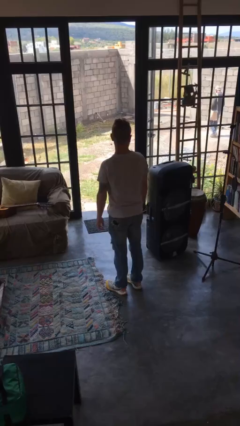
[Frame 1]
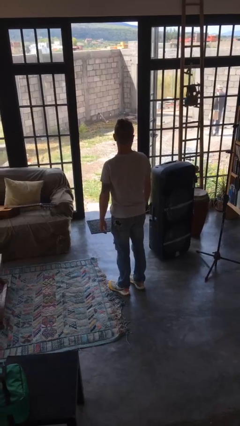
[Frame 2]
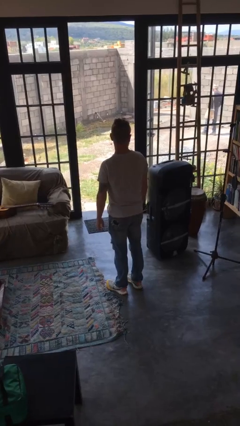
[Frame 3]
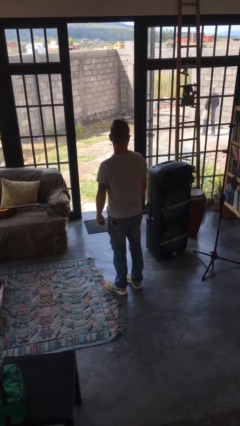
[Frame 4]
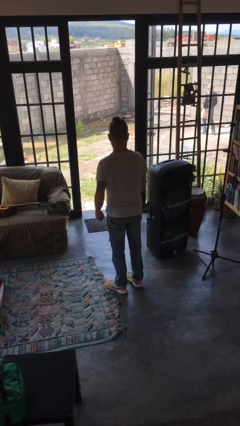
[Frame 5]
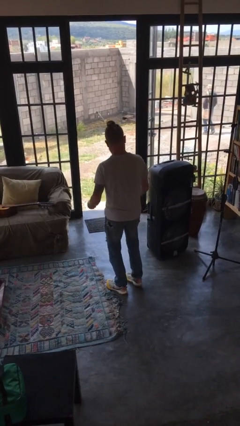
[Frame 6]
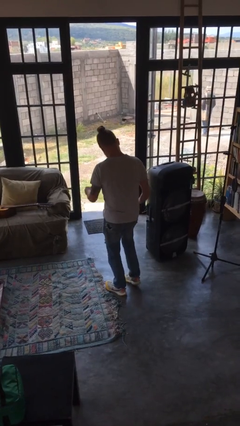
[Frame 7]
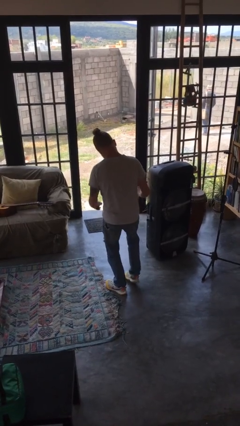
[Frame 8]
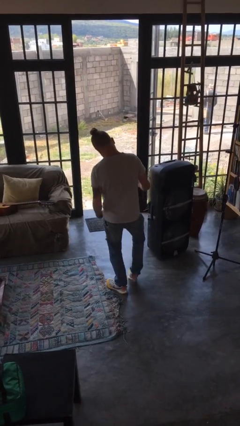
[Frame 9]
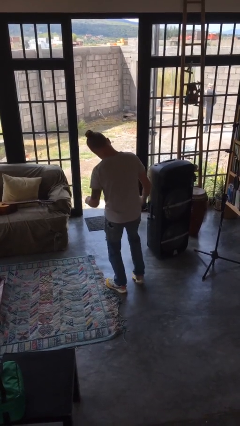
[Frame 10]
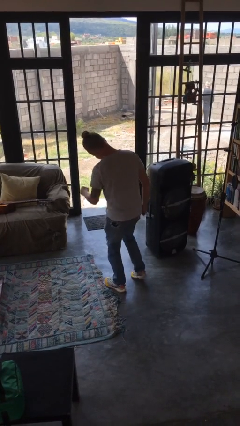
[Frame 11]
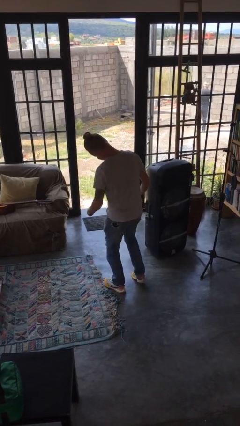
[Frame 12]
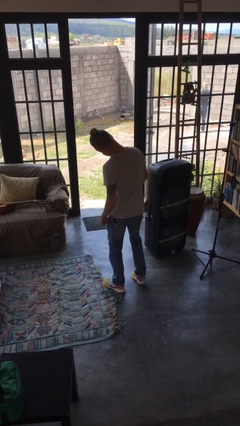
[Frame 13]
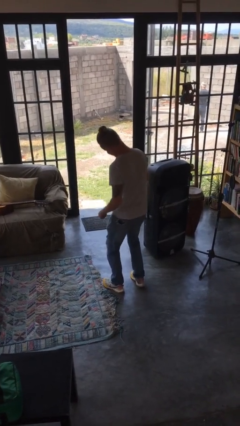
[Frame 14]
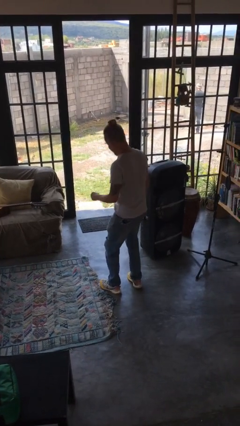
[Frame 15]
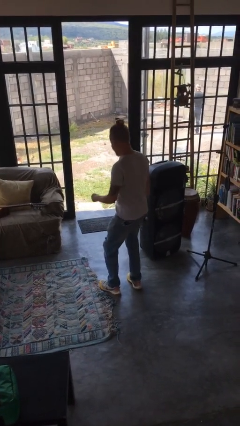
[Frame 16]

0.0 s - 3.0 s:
person dances in place

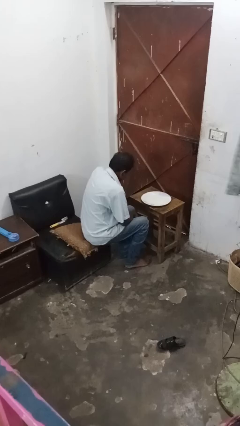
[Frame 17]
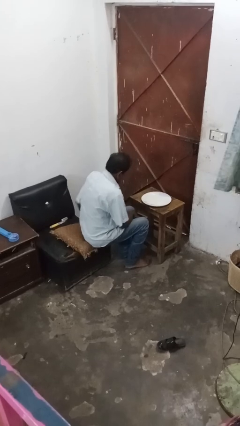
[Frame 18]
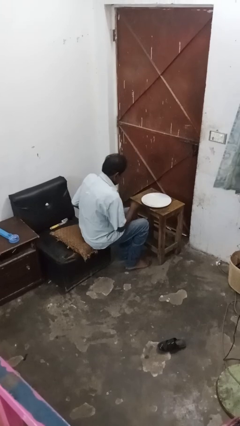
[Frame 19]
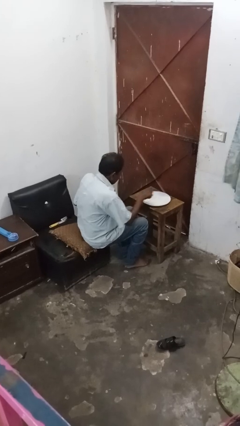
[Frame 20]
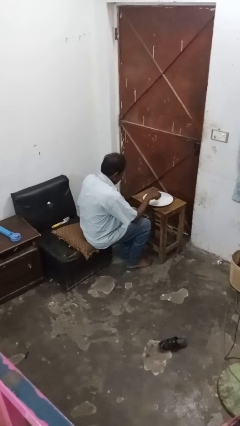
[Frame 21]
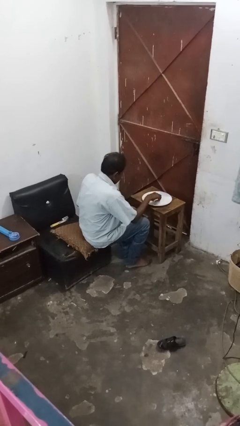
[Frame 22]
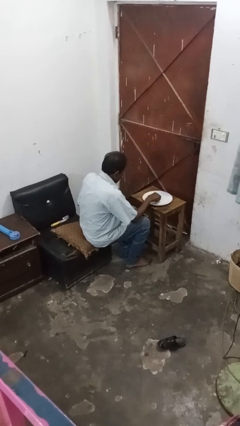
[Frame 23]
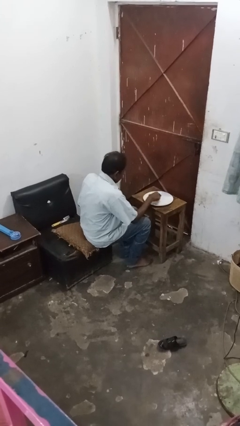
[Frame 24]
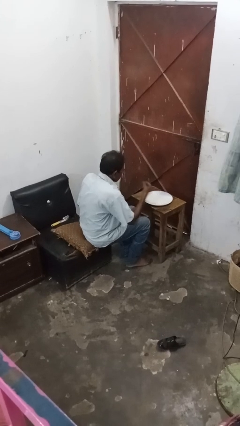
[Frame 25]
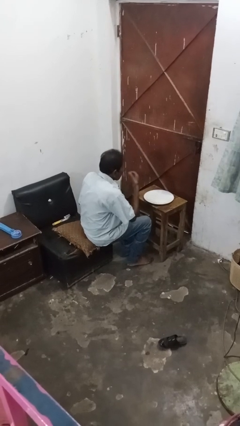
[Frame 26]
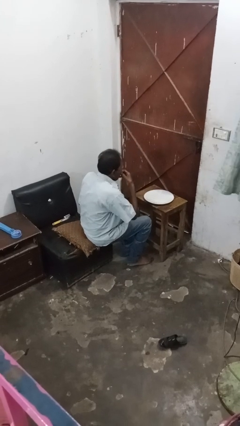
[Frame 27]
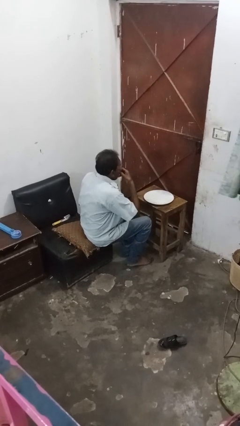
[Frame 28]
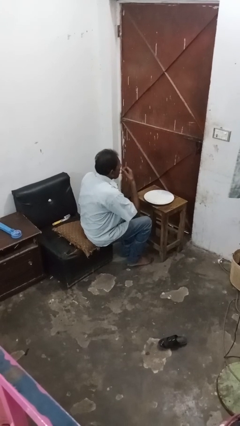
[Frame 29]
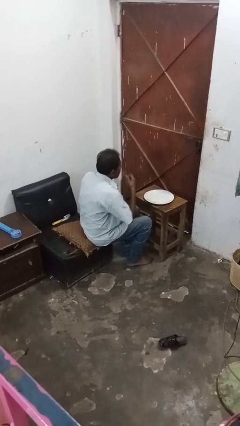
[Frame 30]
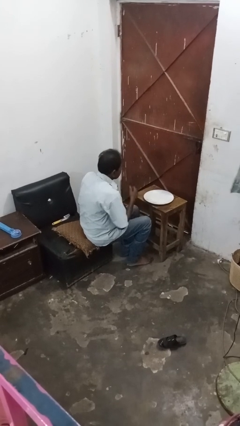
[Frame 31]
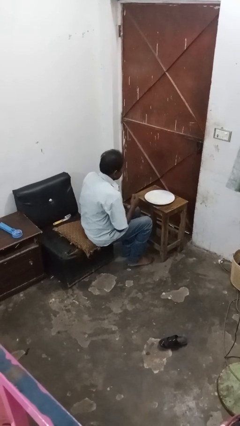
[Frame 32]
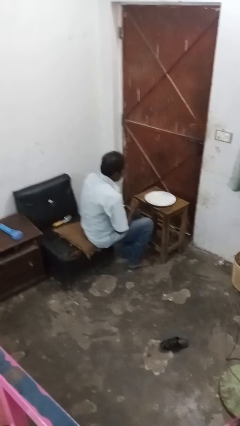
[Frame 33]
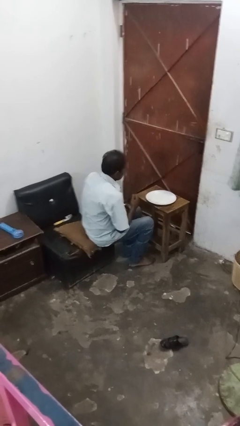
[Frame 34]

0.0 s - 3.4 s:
person eats with hands

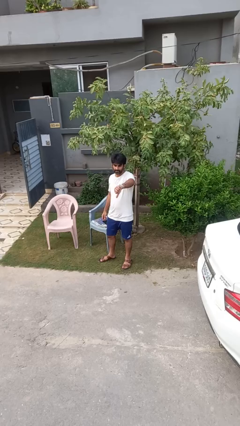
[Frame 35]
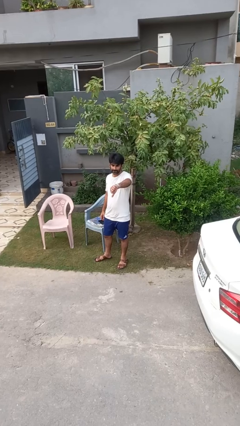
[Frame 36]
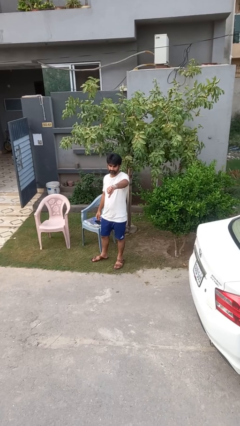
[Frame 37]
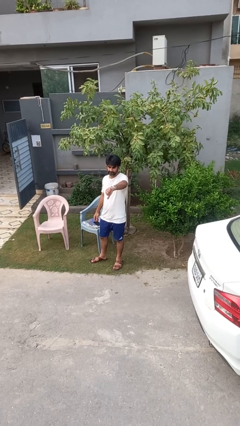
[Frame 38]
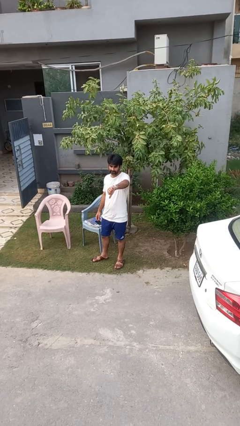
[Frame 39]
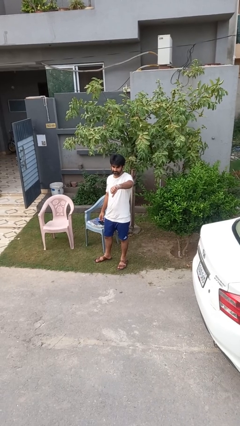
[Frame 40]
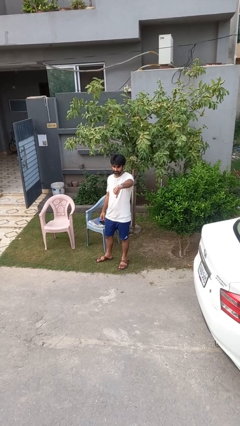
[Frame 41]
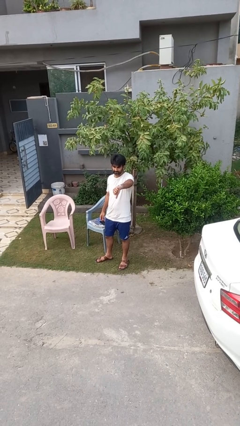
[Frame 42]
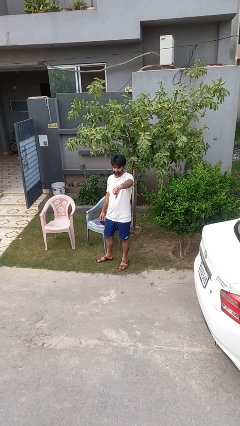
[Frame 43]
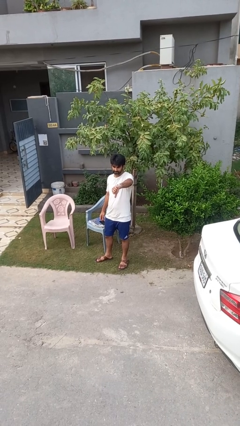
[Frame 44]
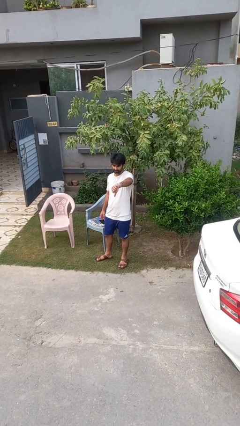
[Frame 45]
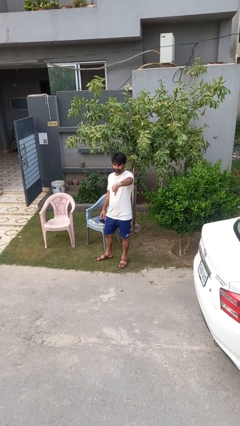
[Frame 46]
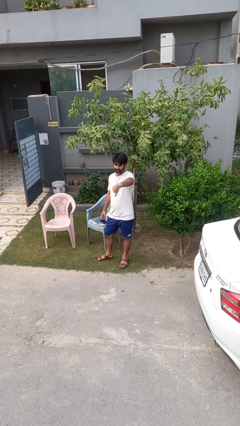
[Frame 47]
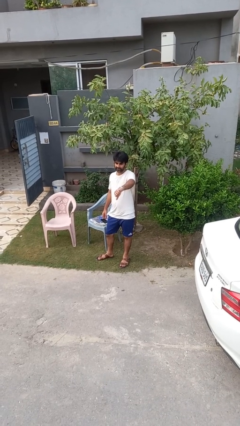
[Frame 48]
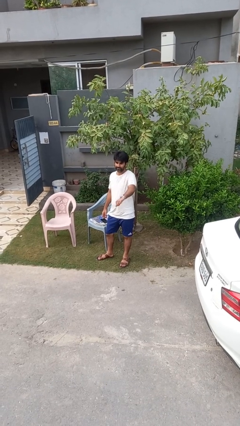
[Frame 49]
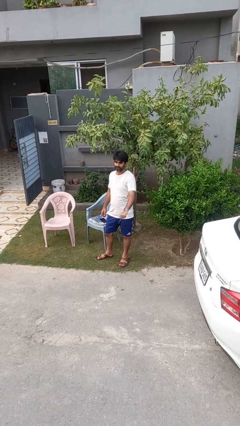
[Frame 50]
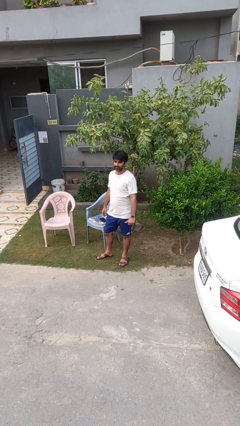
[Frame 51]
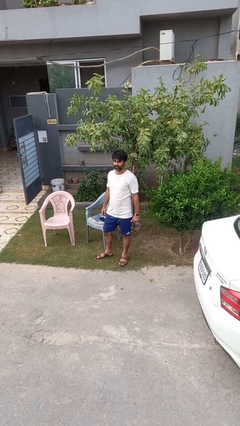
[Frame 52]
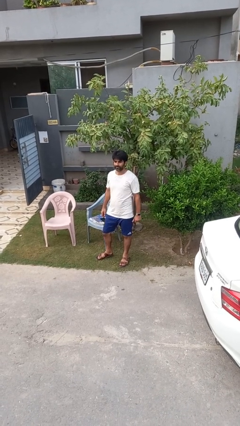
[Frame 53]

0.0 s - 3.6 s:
person gestures thumbs down

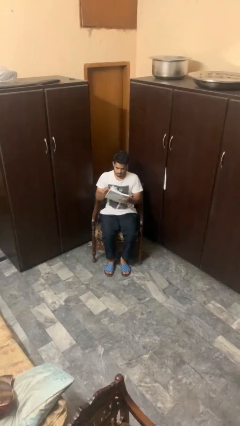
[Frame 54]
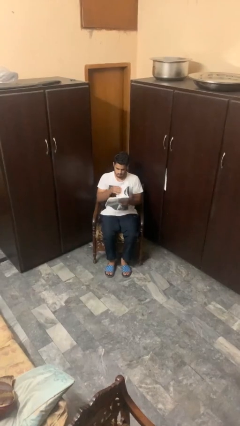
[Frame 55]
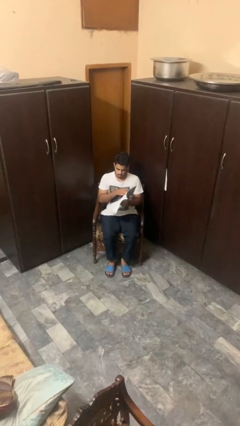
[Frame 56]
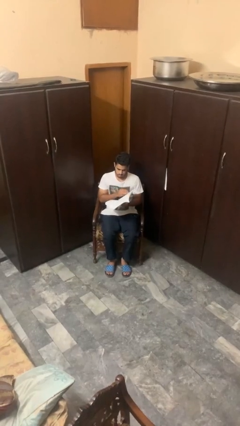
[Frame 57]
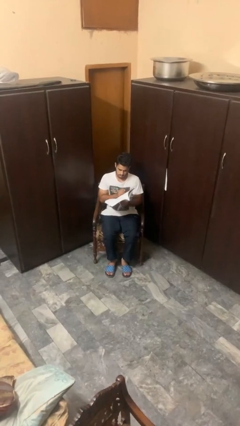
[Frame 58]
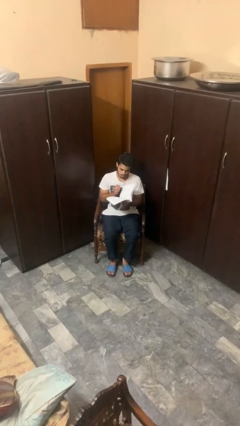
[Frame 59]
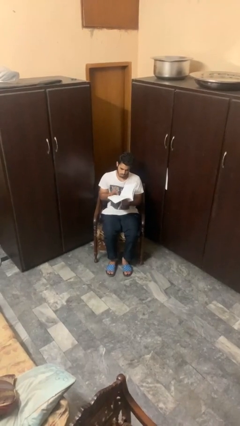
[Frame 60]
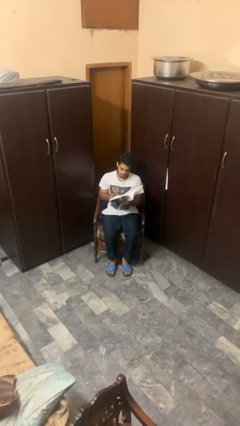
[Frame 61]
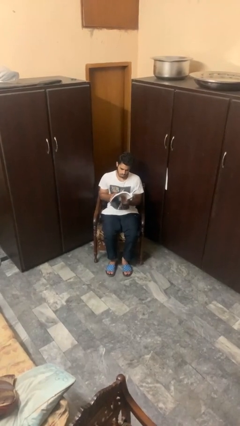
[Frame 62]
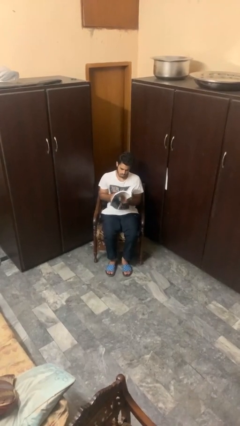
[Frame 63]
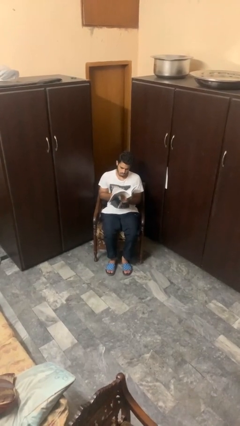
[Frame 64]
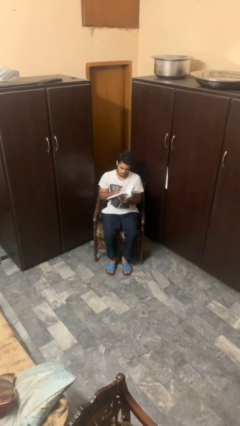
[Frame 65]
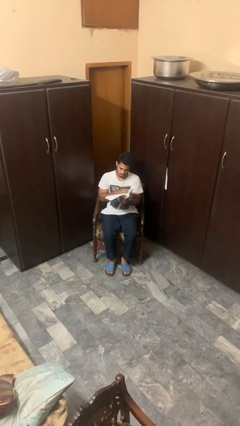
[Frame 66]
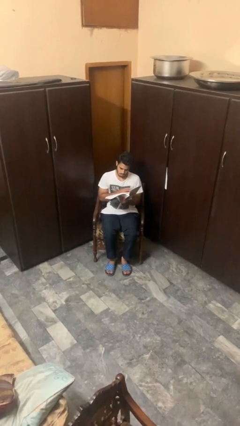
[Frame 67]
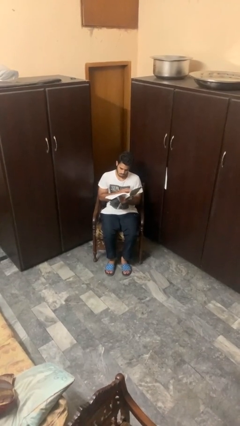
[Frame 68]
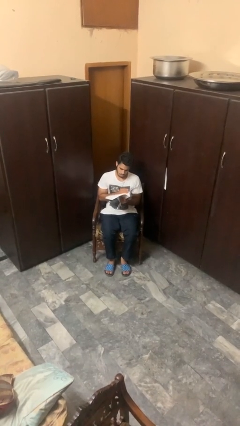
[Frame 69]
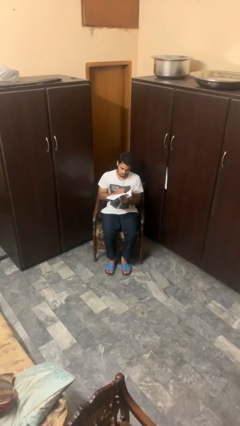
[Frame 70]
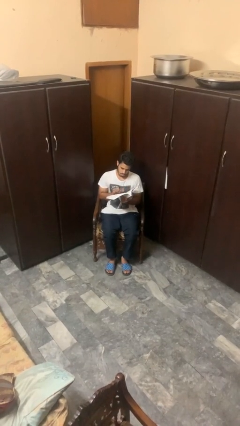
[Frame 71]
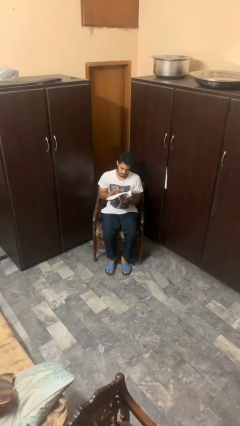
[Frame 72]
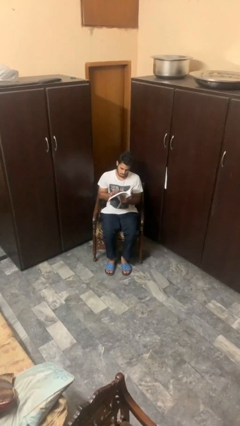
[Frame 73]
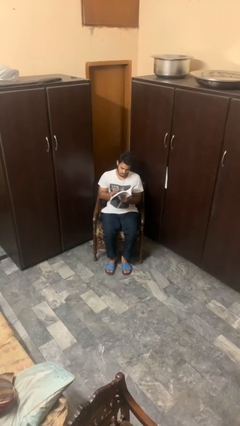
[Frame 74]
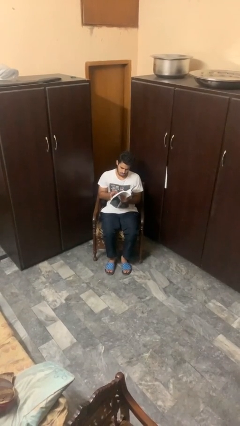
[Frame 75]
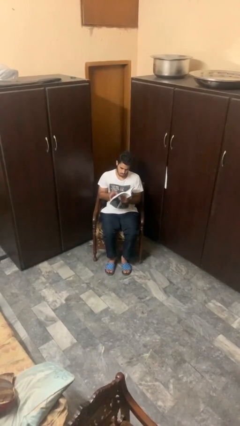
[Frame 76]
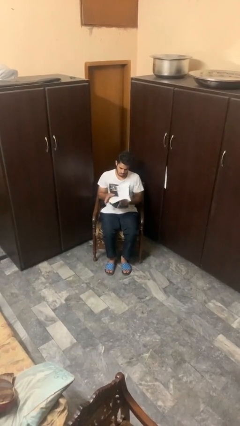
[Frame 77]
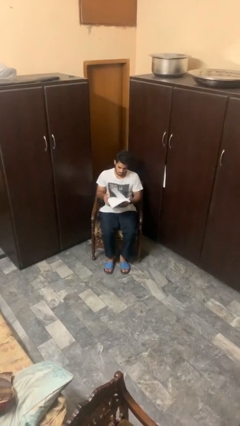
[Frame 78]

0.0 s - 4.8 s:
person reads book

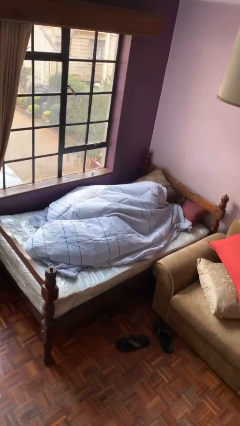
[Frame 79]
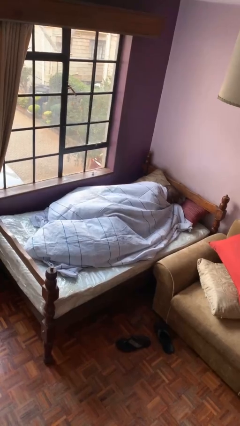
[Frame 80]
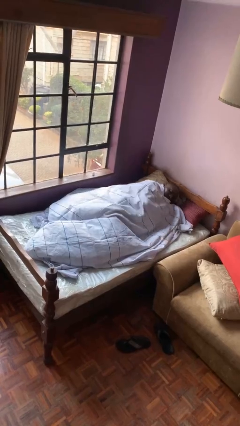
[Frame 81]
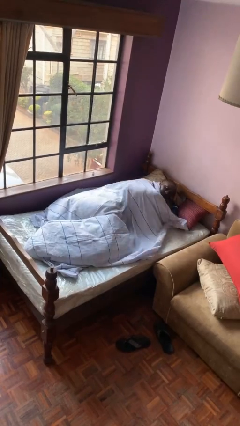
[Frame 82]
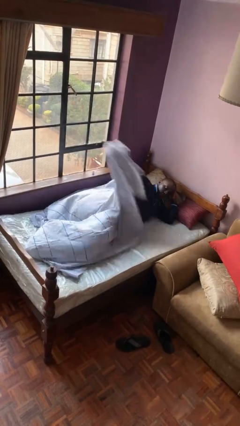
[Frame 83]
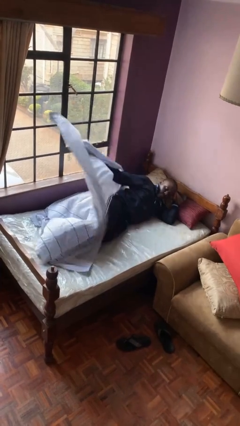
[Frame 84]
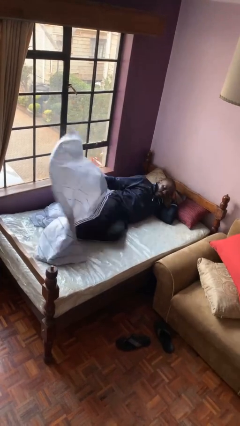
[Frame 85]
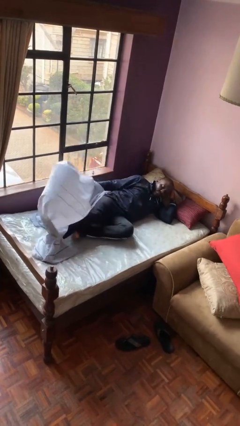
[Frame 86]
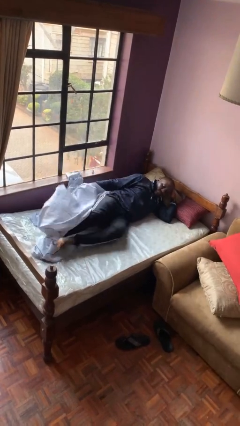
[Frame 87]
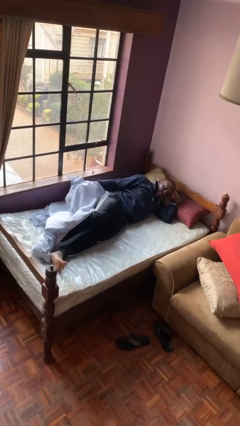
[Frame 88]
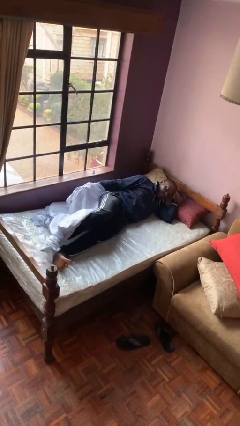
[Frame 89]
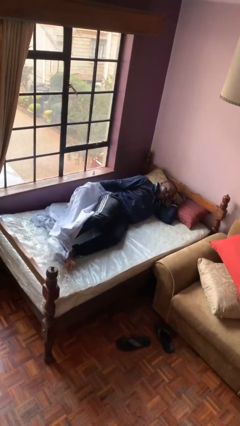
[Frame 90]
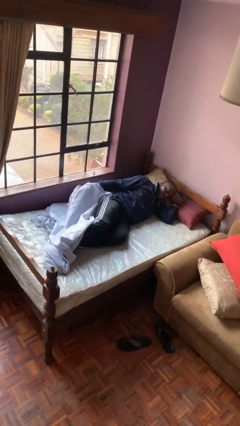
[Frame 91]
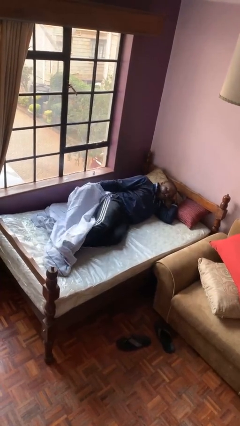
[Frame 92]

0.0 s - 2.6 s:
person uncovers with bedsheets

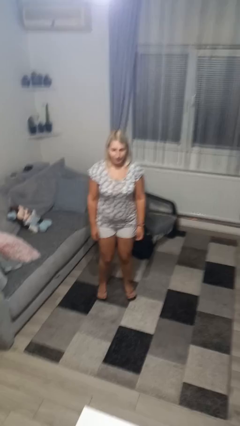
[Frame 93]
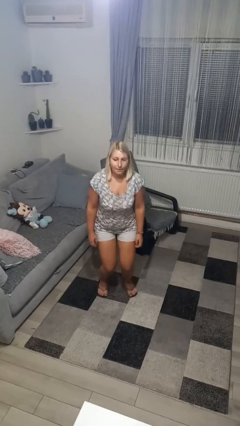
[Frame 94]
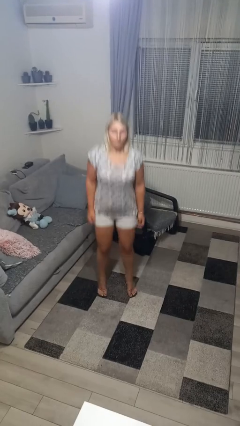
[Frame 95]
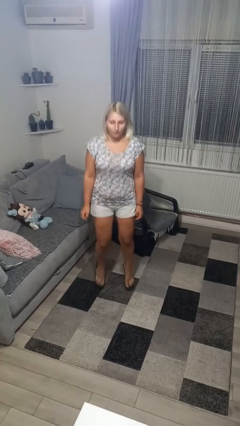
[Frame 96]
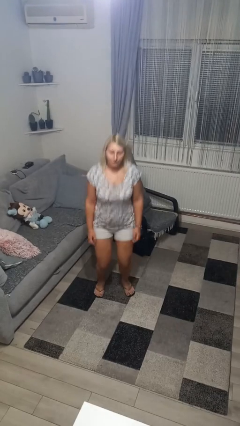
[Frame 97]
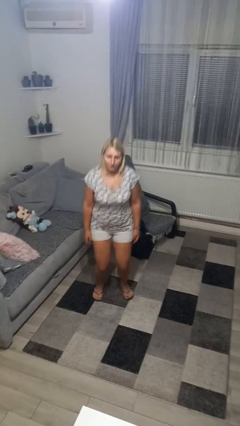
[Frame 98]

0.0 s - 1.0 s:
person jumps
